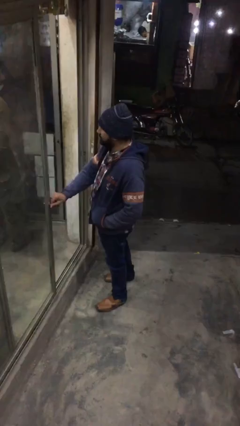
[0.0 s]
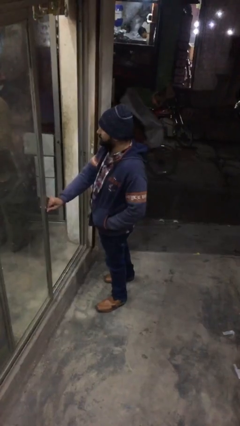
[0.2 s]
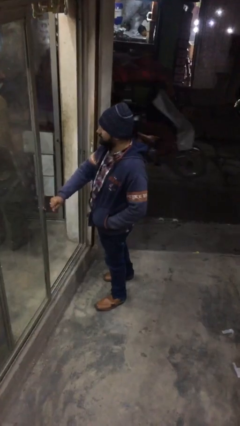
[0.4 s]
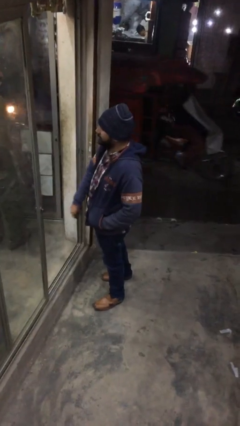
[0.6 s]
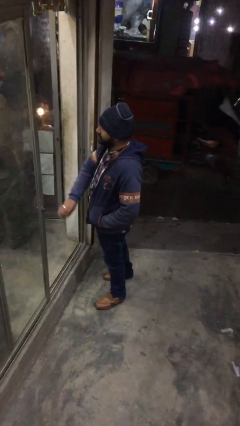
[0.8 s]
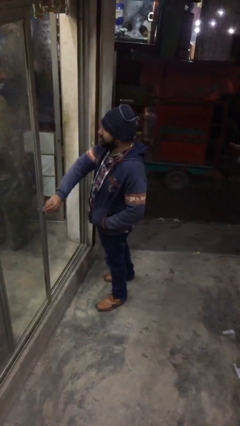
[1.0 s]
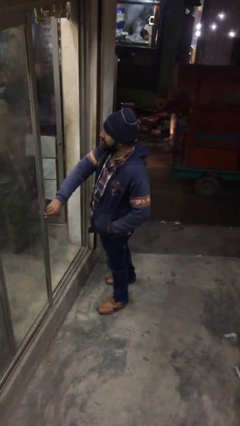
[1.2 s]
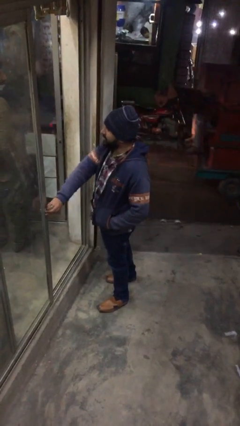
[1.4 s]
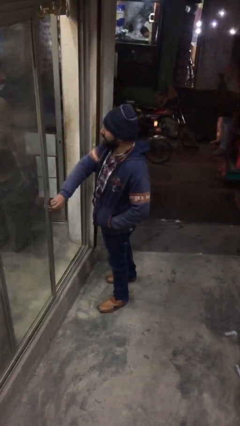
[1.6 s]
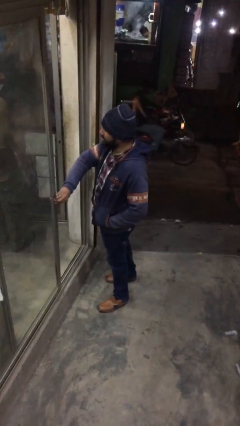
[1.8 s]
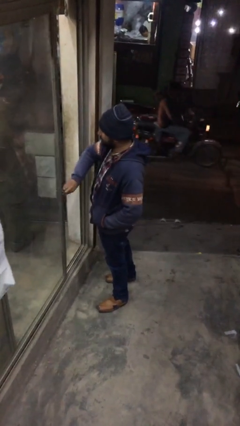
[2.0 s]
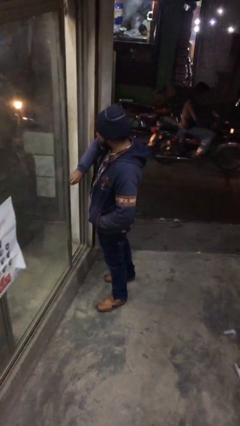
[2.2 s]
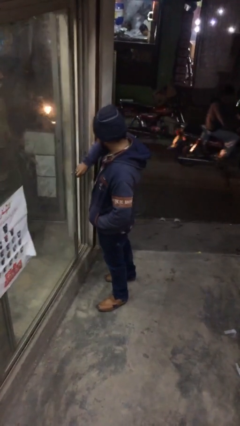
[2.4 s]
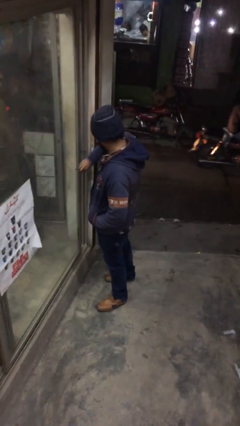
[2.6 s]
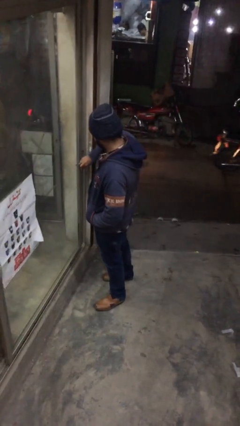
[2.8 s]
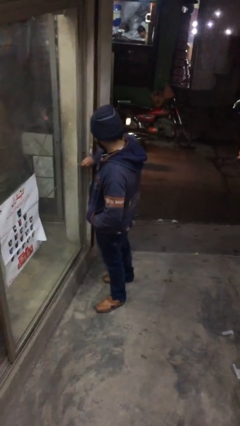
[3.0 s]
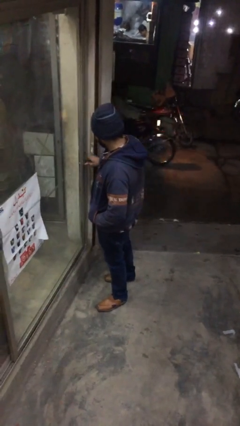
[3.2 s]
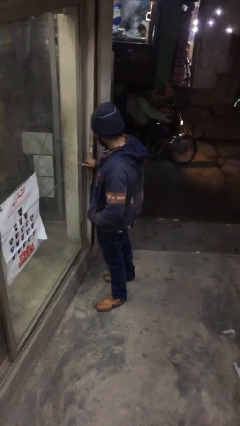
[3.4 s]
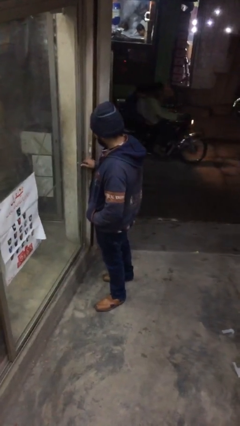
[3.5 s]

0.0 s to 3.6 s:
person closes facility door

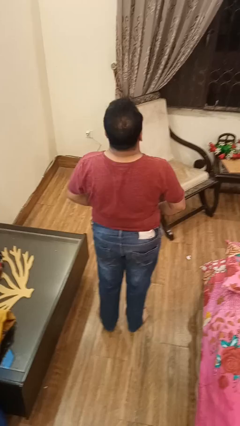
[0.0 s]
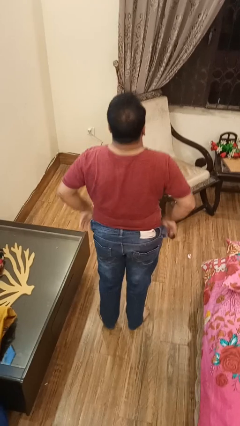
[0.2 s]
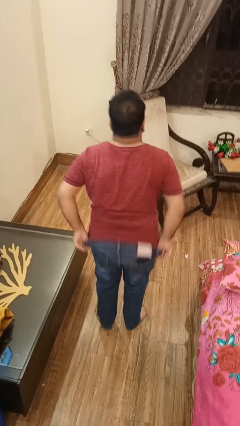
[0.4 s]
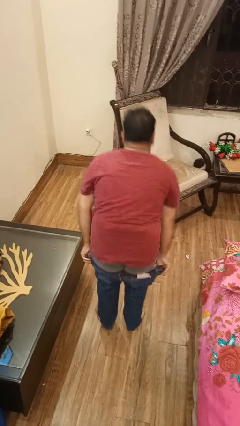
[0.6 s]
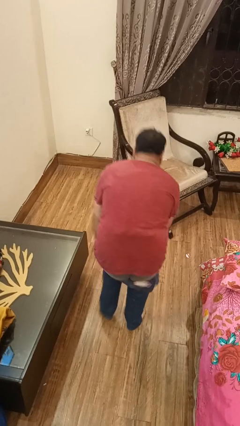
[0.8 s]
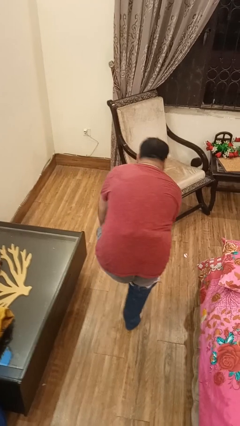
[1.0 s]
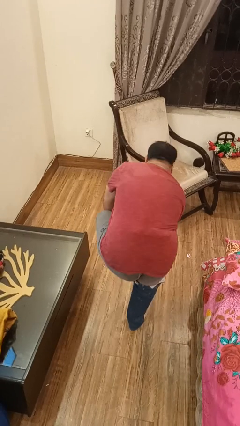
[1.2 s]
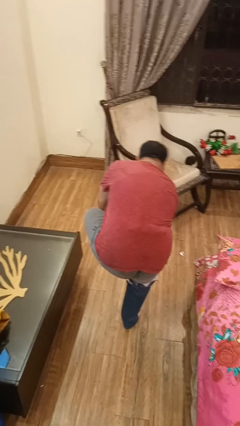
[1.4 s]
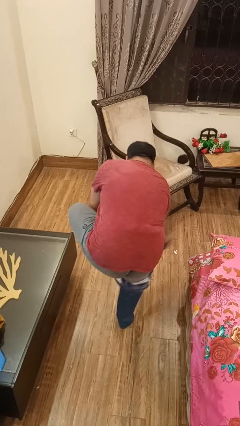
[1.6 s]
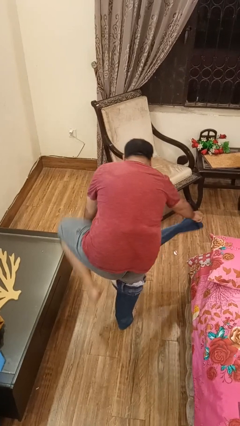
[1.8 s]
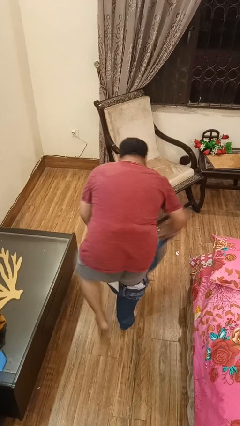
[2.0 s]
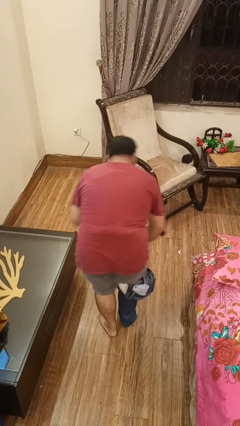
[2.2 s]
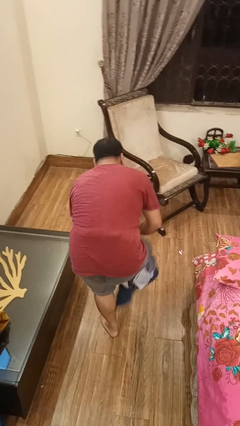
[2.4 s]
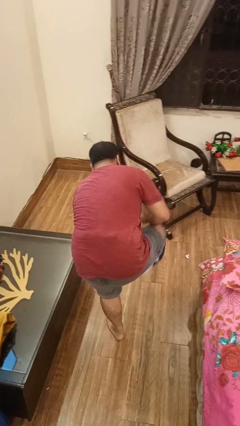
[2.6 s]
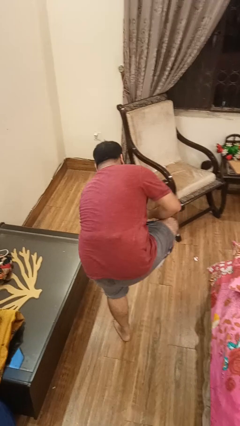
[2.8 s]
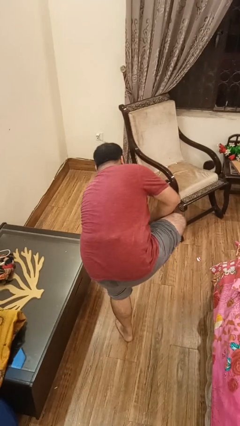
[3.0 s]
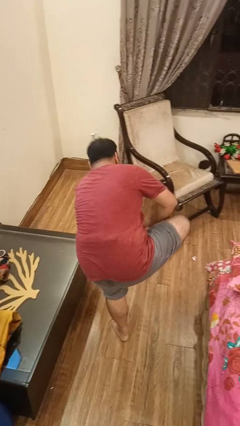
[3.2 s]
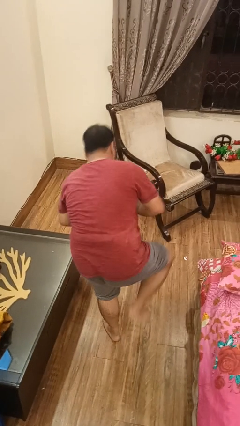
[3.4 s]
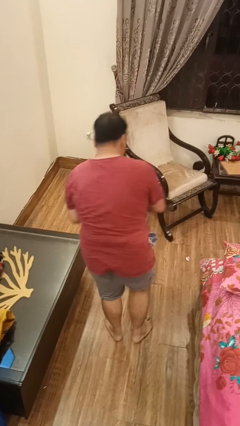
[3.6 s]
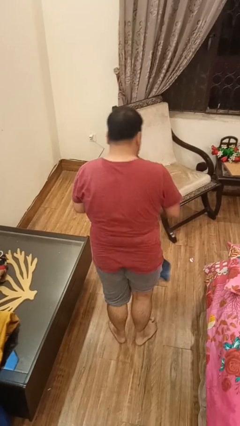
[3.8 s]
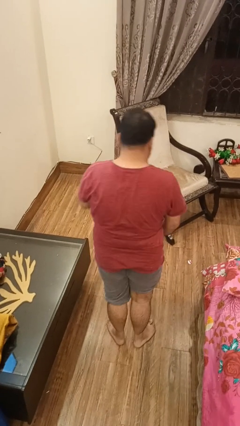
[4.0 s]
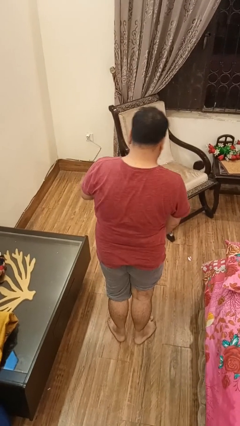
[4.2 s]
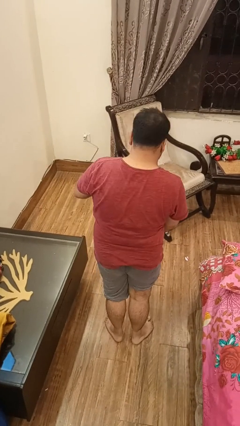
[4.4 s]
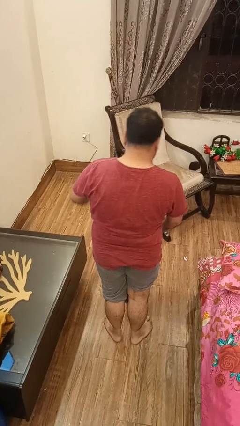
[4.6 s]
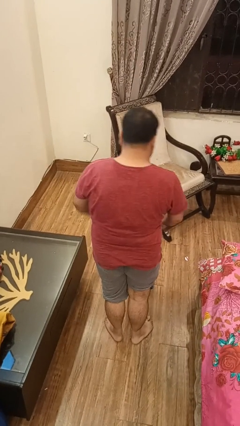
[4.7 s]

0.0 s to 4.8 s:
person takes off pants

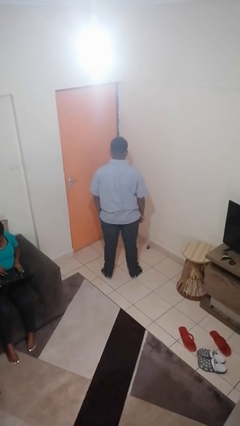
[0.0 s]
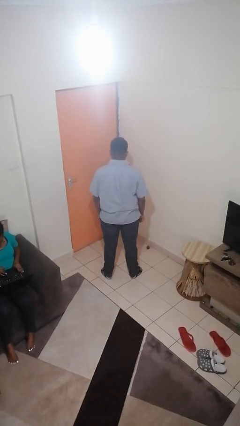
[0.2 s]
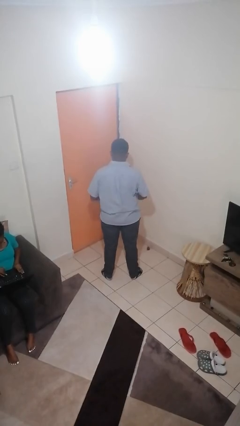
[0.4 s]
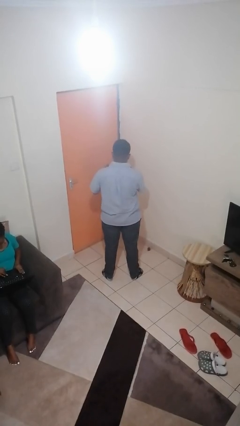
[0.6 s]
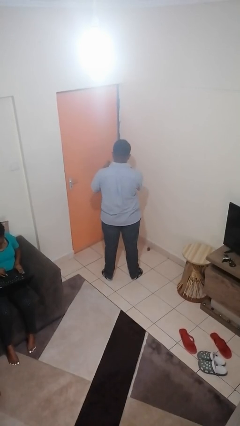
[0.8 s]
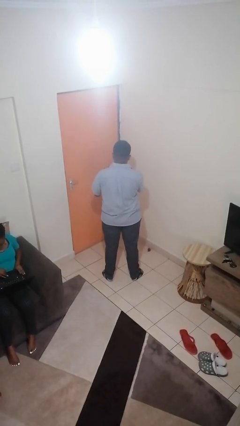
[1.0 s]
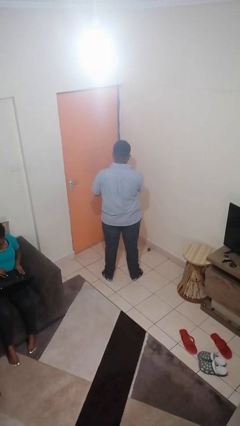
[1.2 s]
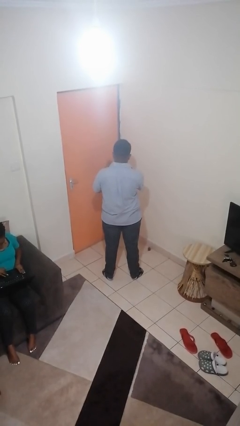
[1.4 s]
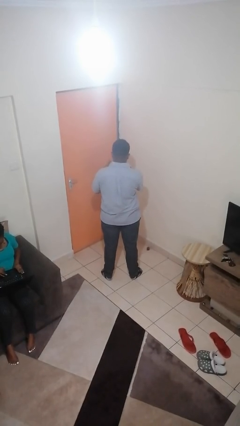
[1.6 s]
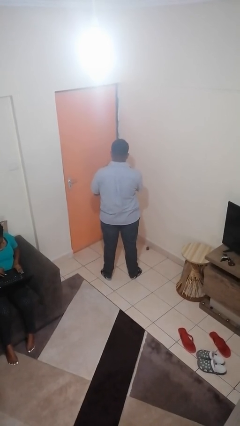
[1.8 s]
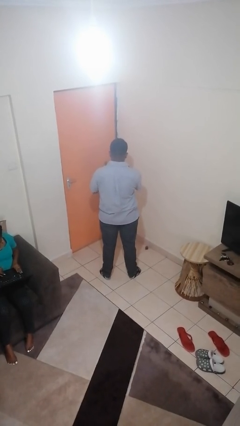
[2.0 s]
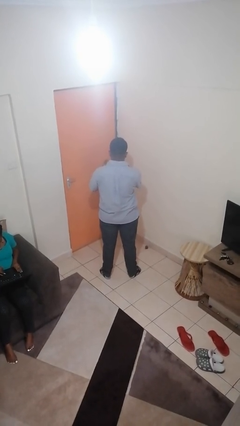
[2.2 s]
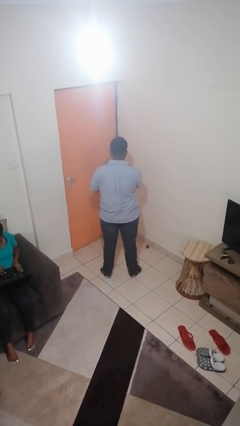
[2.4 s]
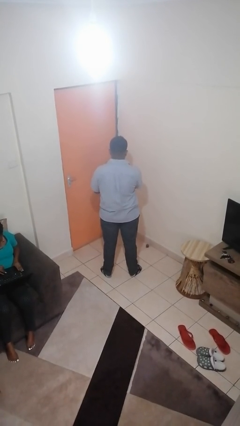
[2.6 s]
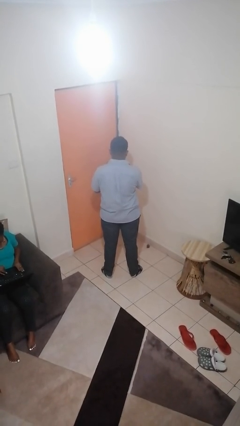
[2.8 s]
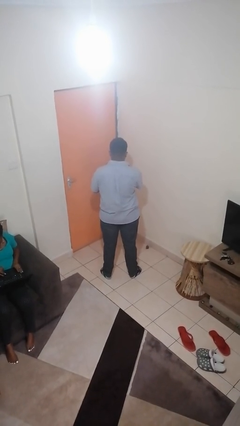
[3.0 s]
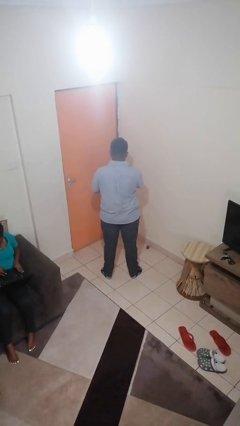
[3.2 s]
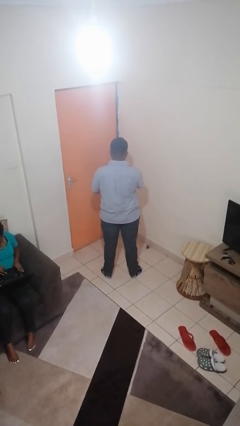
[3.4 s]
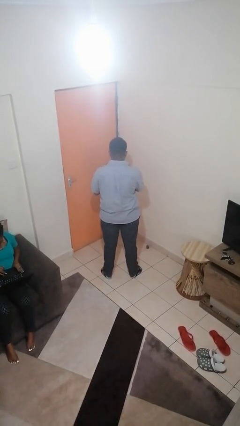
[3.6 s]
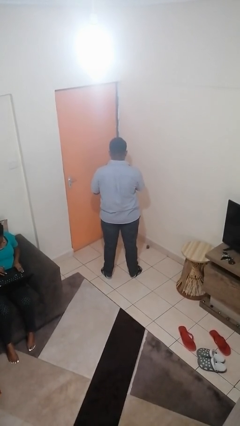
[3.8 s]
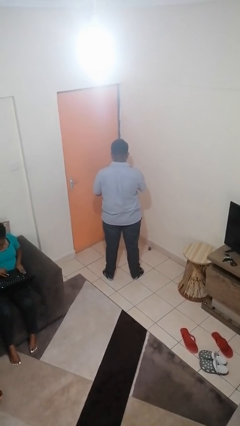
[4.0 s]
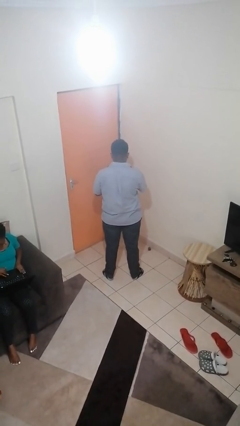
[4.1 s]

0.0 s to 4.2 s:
person cracks knuckles

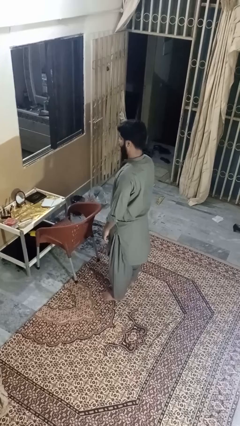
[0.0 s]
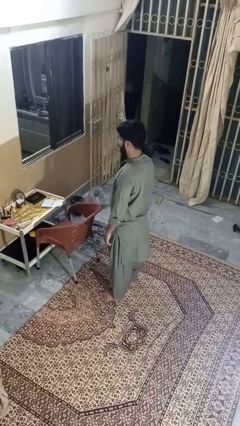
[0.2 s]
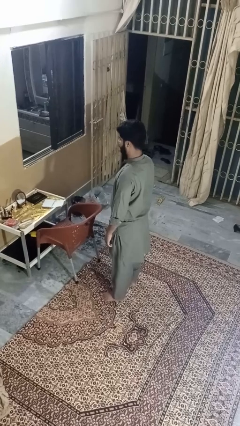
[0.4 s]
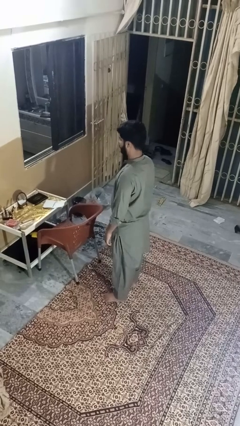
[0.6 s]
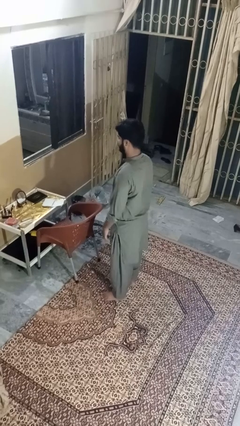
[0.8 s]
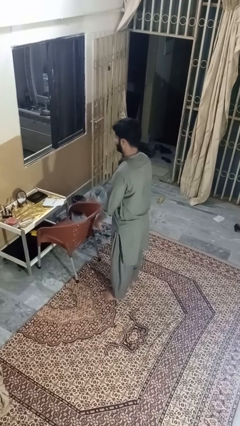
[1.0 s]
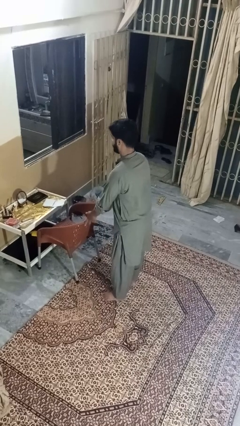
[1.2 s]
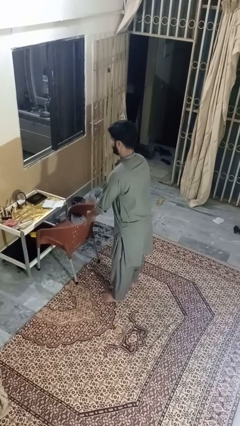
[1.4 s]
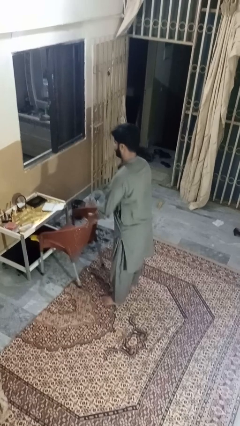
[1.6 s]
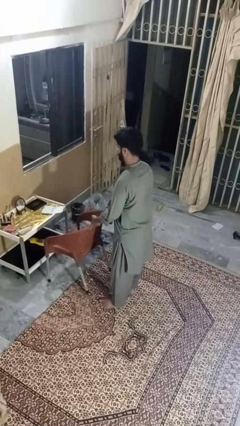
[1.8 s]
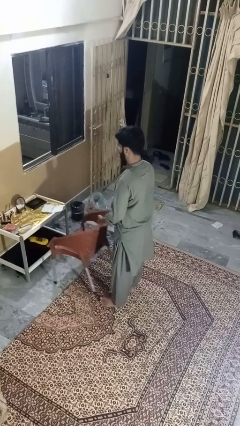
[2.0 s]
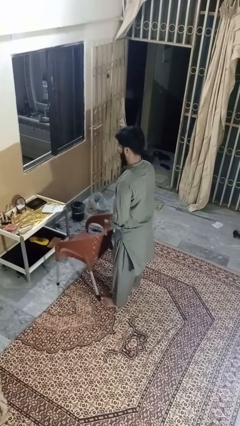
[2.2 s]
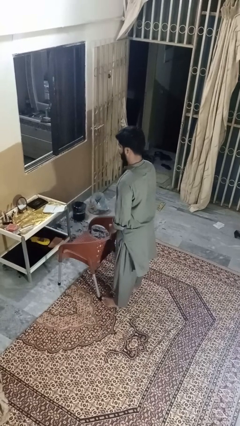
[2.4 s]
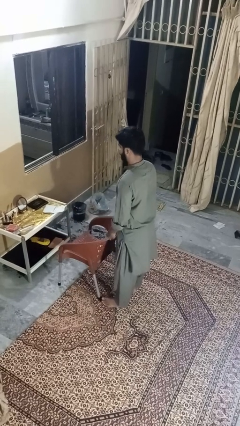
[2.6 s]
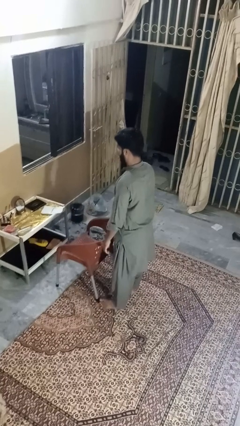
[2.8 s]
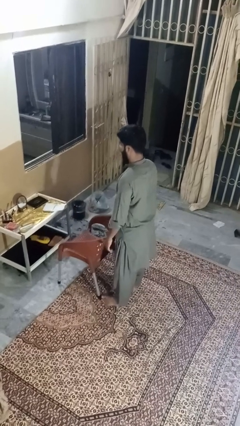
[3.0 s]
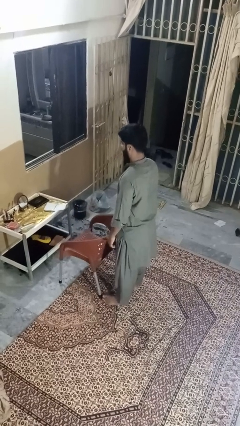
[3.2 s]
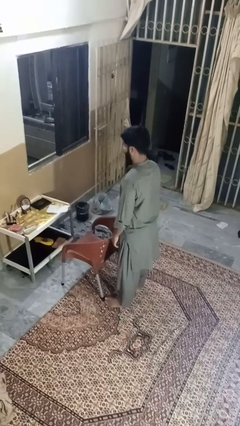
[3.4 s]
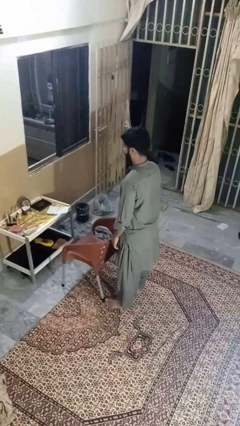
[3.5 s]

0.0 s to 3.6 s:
person pulls out chair

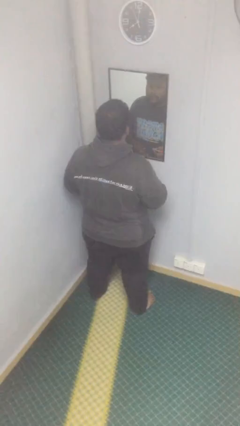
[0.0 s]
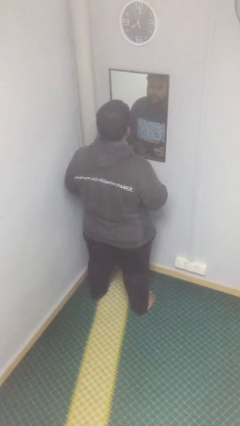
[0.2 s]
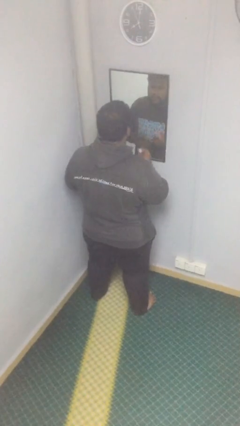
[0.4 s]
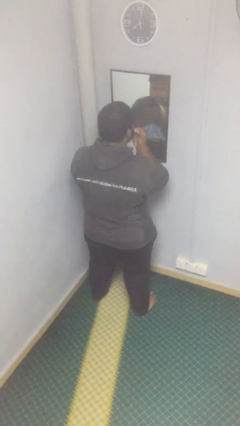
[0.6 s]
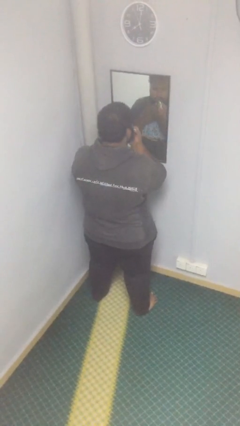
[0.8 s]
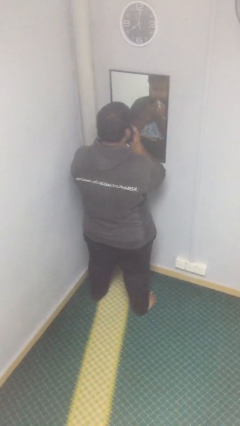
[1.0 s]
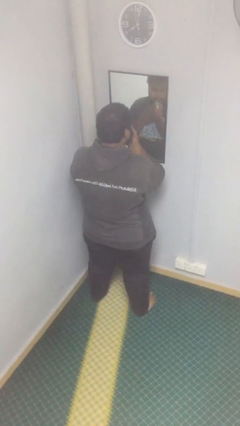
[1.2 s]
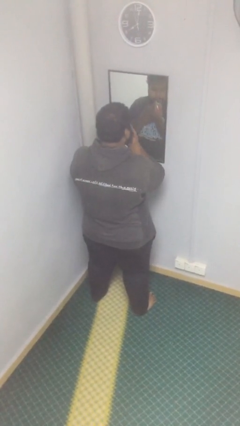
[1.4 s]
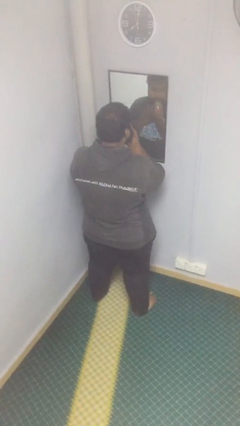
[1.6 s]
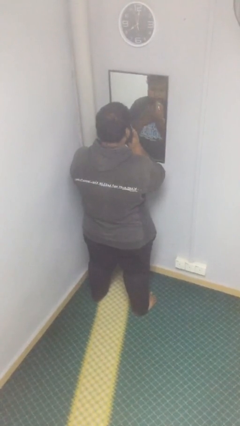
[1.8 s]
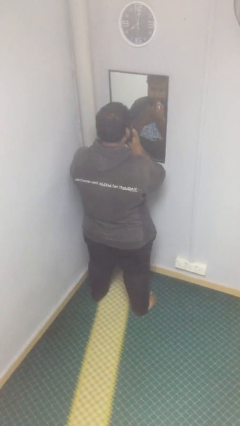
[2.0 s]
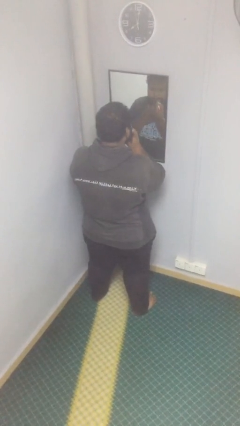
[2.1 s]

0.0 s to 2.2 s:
person applies lip makeup
